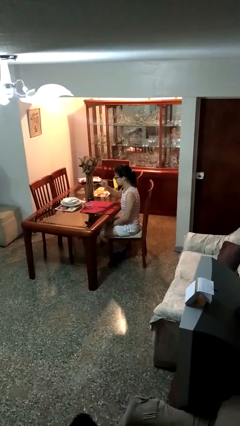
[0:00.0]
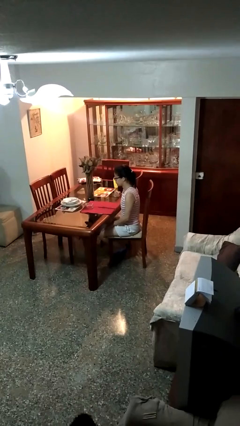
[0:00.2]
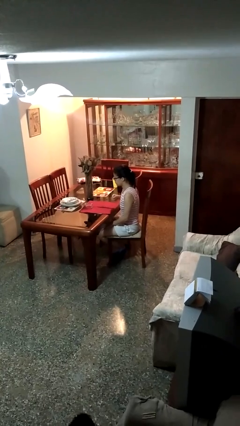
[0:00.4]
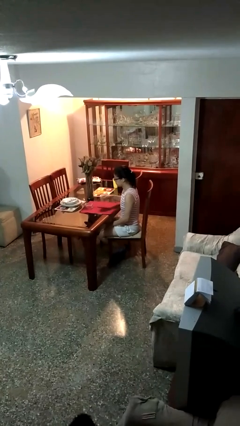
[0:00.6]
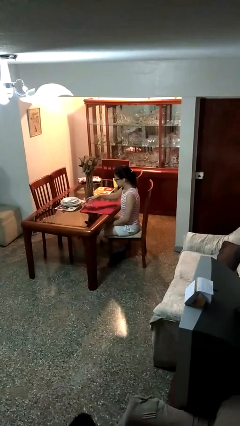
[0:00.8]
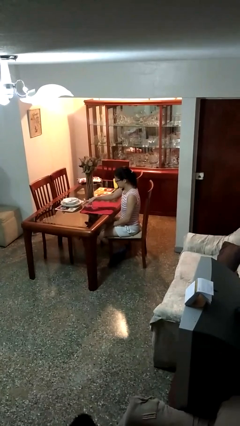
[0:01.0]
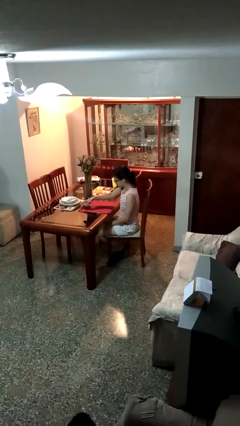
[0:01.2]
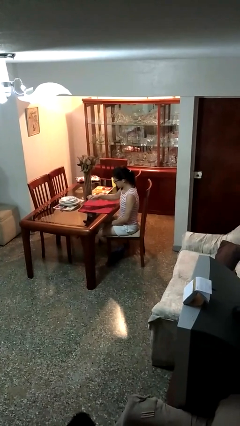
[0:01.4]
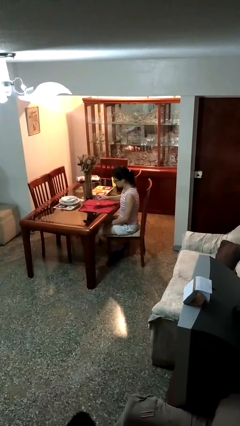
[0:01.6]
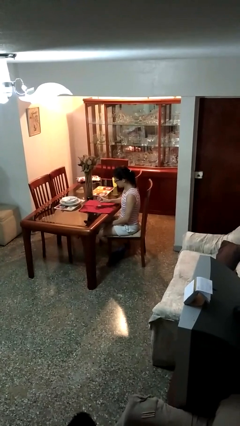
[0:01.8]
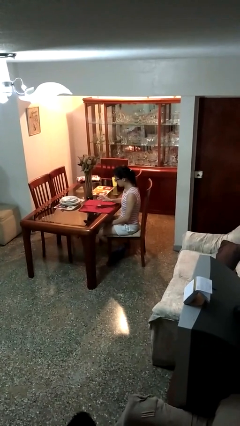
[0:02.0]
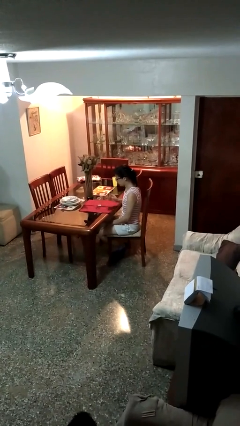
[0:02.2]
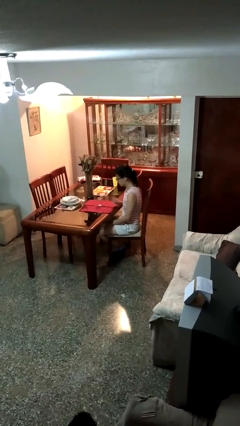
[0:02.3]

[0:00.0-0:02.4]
person sets upright glass

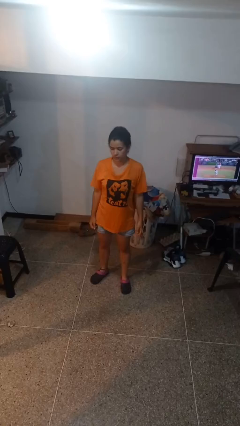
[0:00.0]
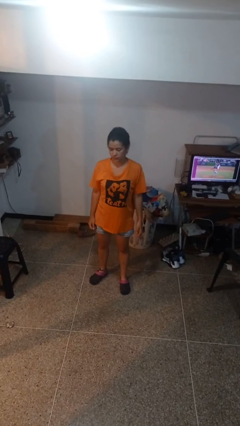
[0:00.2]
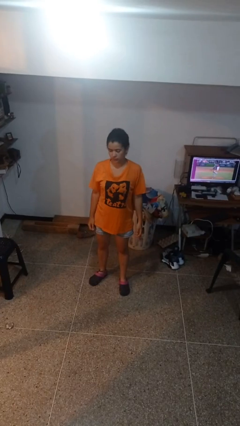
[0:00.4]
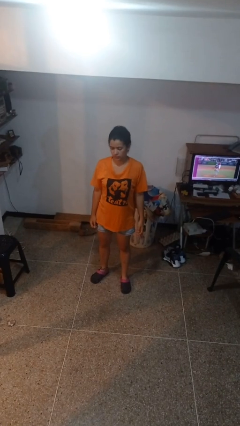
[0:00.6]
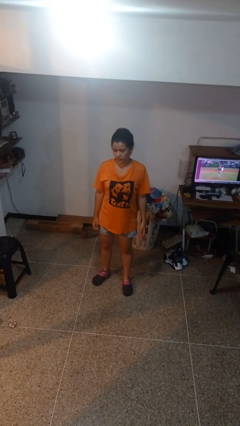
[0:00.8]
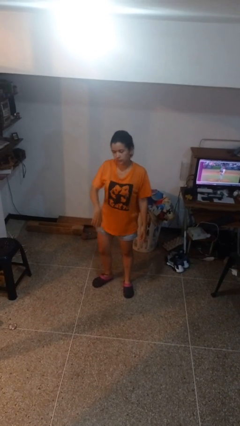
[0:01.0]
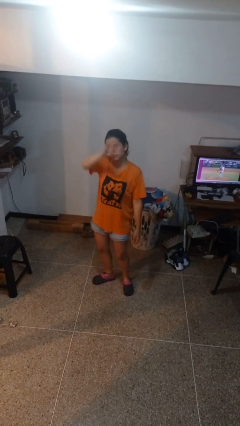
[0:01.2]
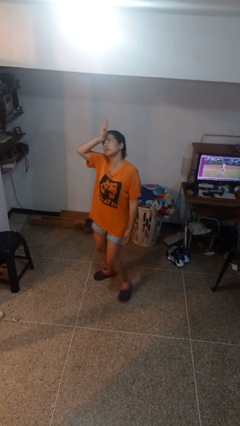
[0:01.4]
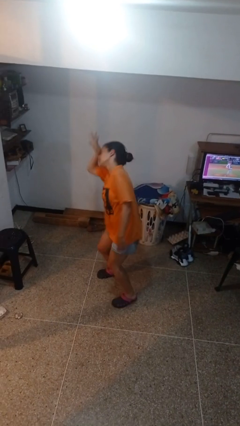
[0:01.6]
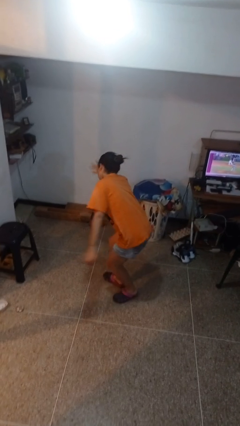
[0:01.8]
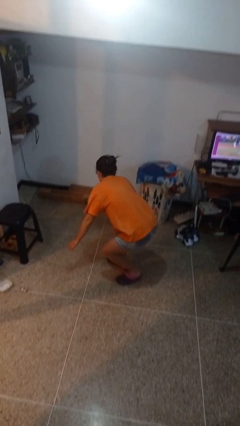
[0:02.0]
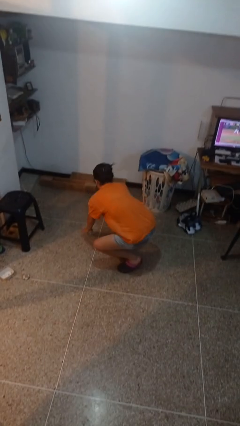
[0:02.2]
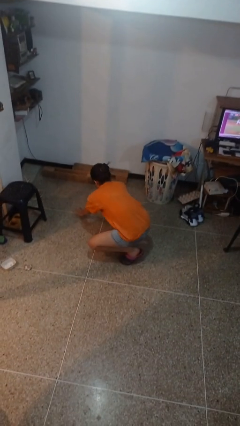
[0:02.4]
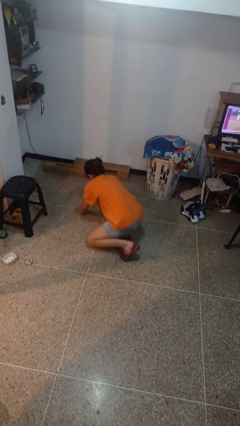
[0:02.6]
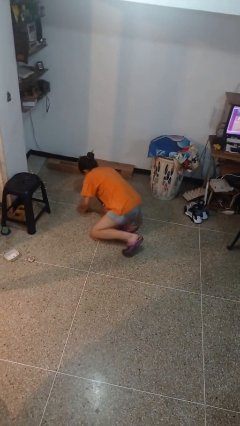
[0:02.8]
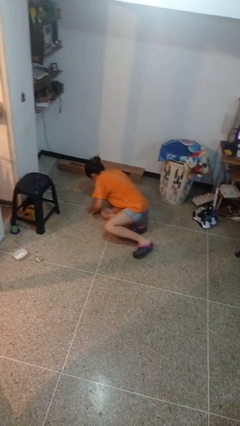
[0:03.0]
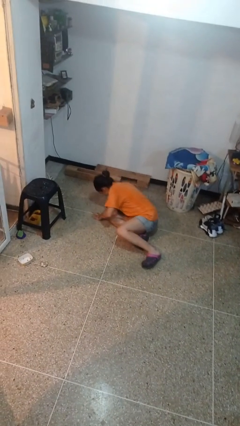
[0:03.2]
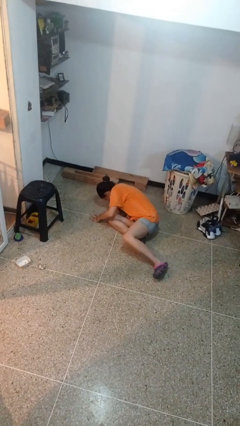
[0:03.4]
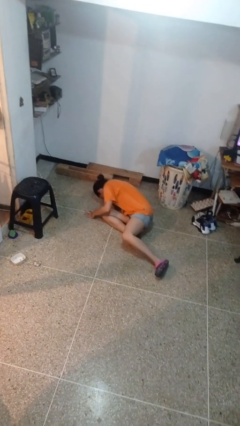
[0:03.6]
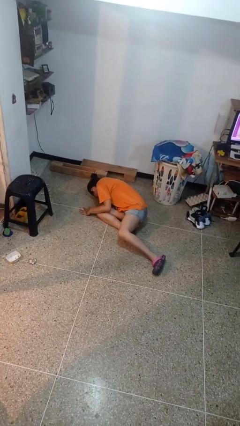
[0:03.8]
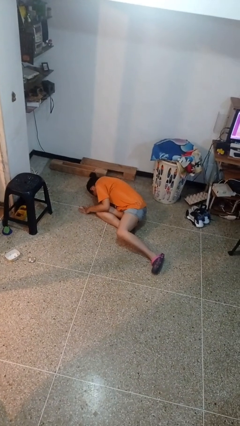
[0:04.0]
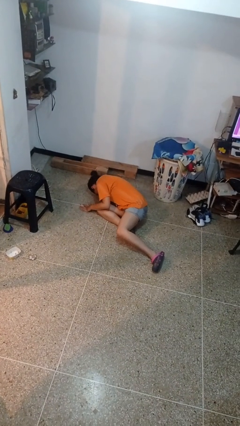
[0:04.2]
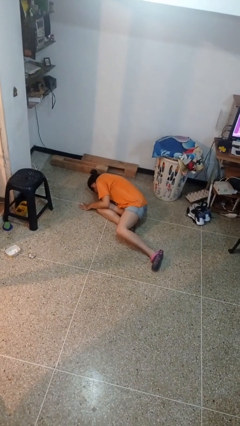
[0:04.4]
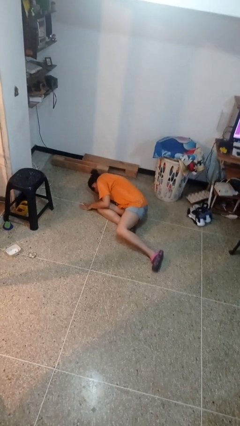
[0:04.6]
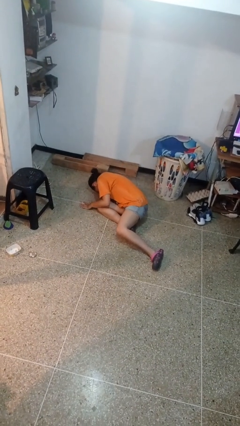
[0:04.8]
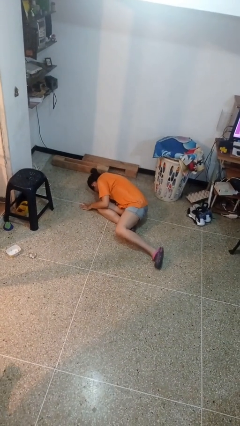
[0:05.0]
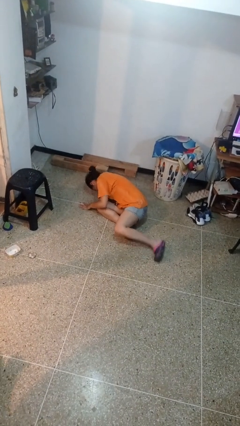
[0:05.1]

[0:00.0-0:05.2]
person falls while standing

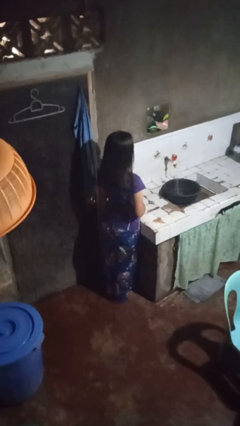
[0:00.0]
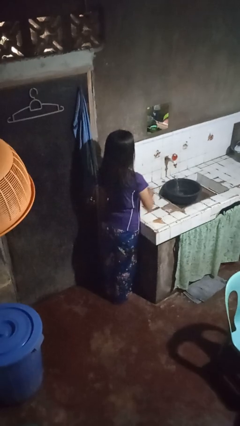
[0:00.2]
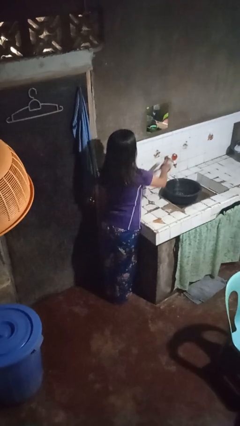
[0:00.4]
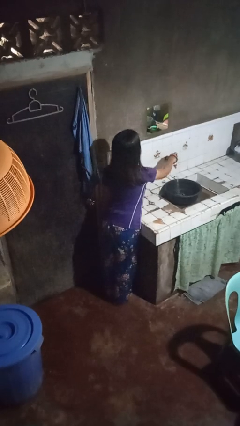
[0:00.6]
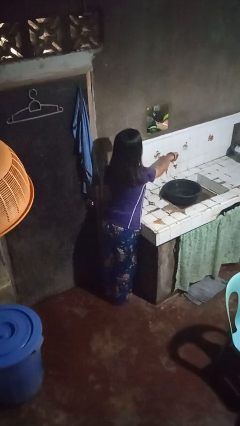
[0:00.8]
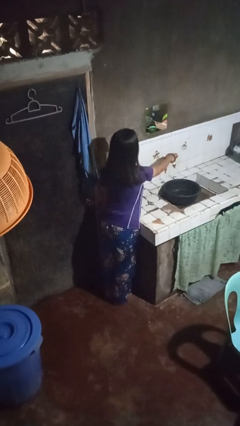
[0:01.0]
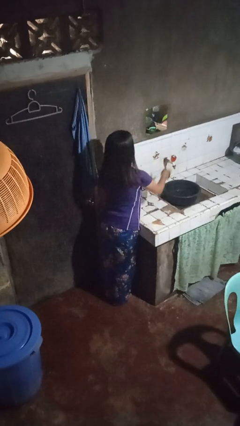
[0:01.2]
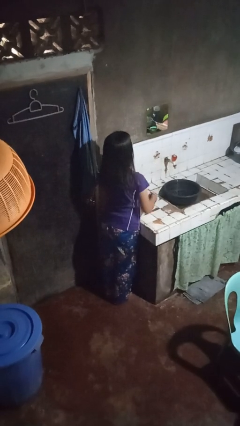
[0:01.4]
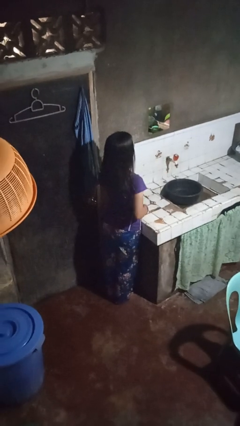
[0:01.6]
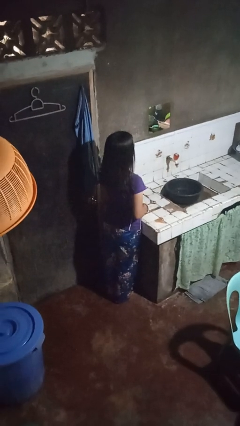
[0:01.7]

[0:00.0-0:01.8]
person turns off faucet

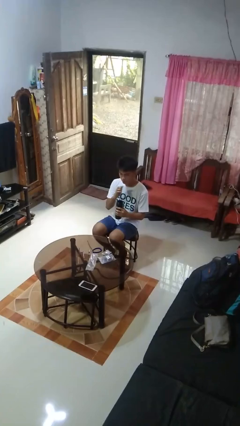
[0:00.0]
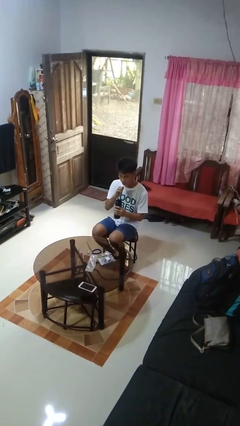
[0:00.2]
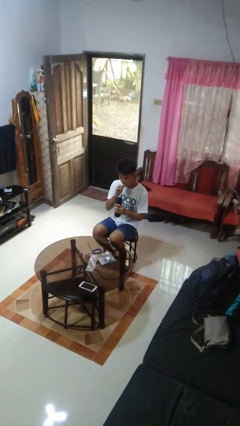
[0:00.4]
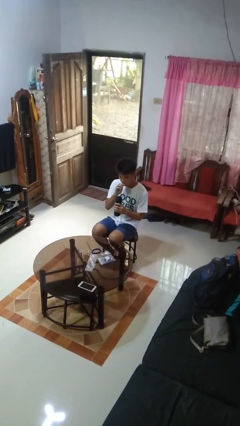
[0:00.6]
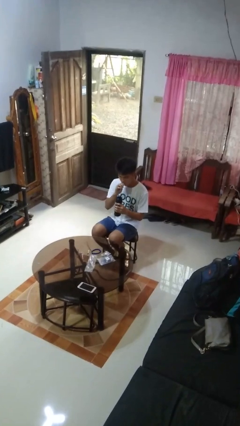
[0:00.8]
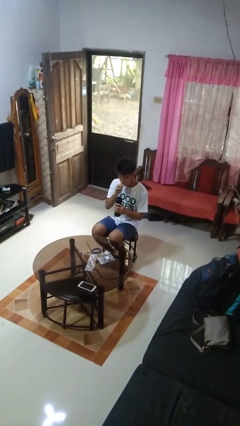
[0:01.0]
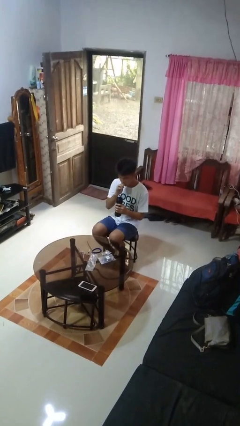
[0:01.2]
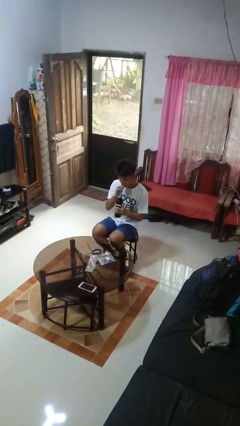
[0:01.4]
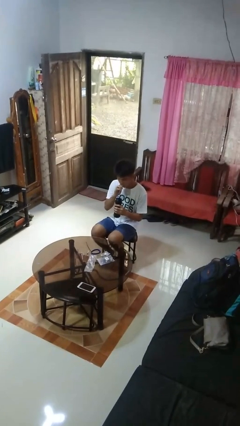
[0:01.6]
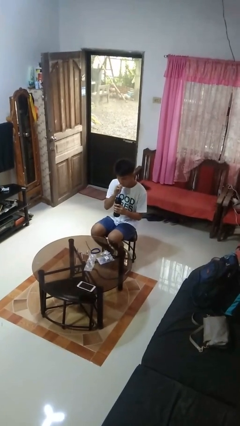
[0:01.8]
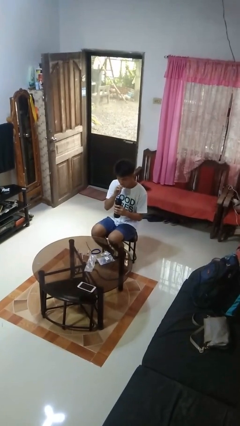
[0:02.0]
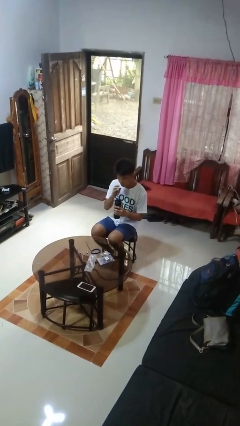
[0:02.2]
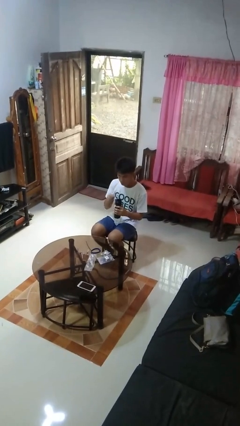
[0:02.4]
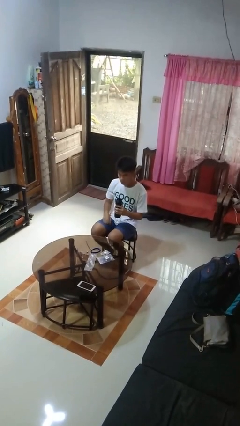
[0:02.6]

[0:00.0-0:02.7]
person drinks from straw

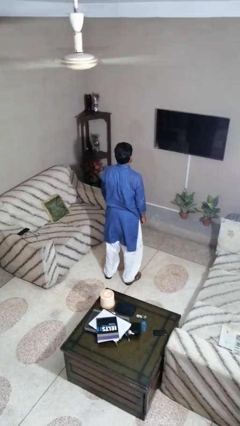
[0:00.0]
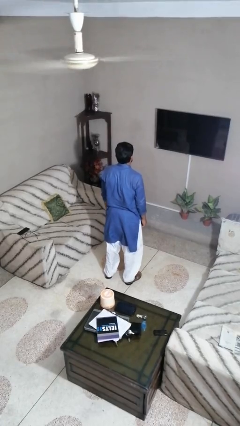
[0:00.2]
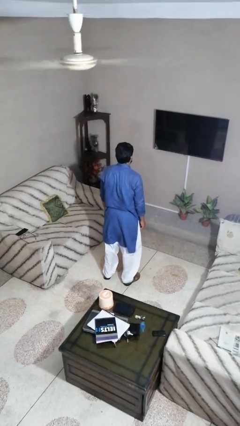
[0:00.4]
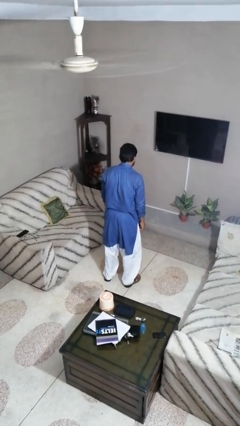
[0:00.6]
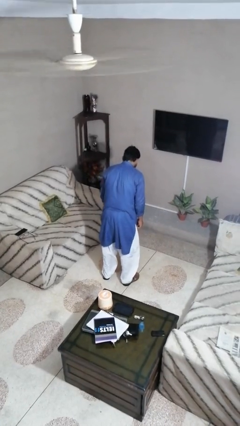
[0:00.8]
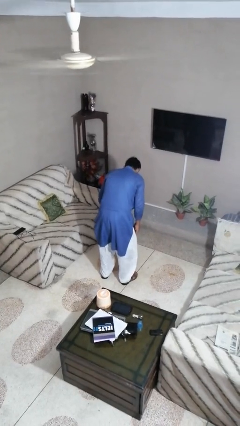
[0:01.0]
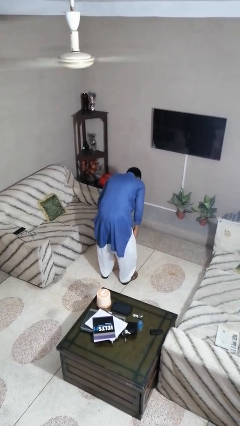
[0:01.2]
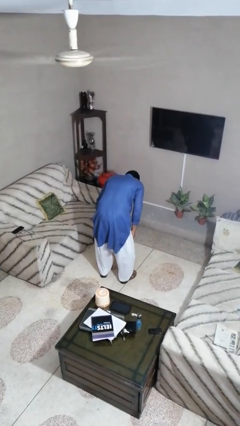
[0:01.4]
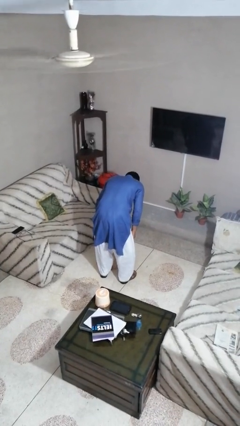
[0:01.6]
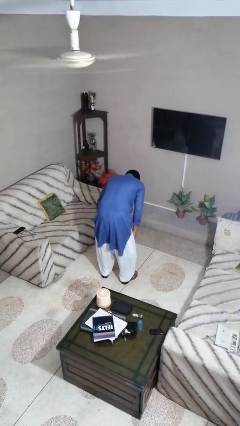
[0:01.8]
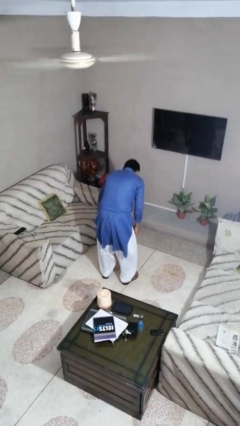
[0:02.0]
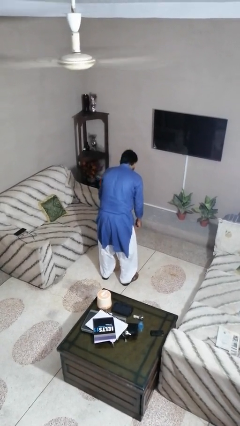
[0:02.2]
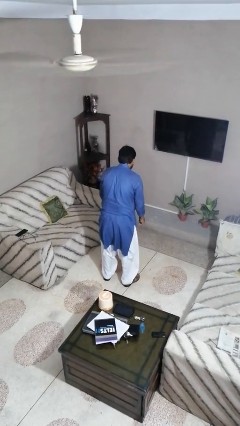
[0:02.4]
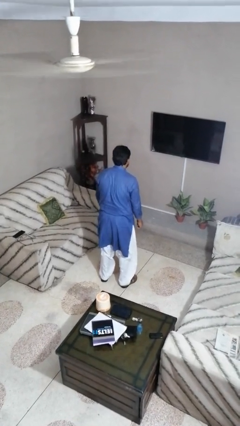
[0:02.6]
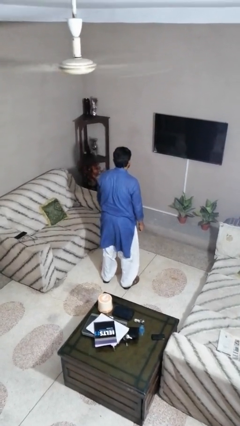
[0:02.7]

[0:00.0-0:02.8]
person bows

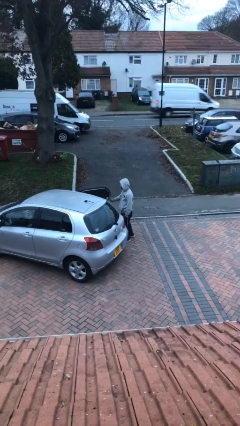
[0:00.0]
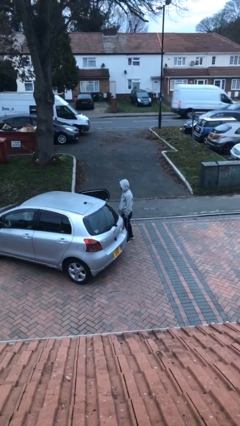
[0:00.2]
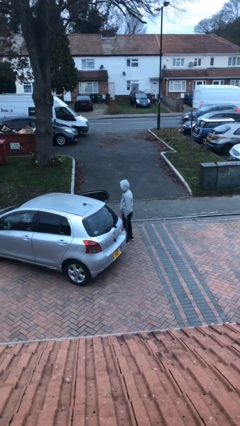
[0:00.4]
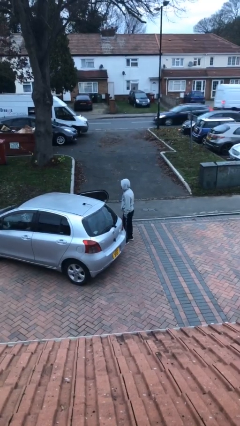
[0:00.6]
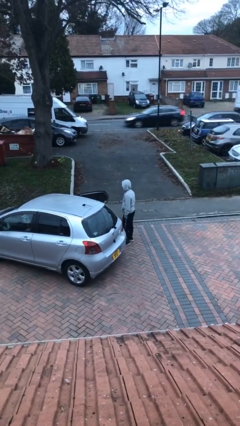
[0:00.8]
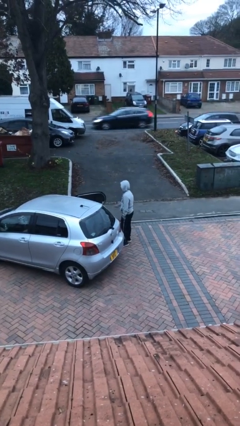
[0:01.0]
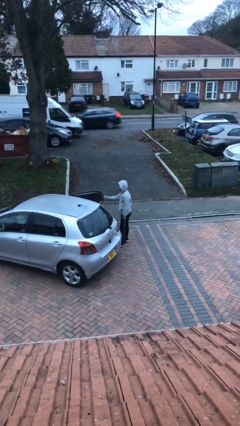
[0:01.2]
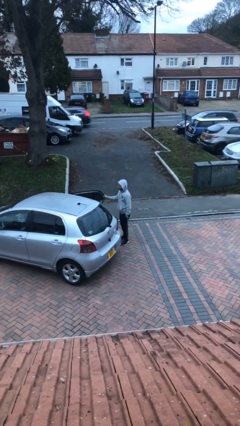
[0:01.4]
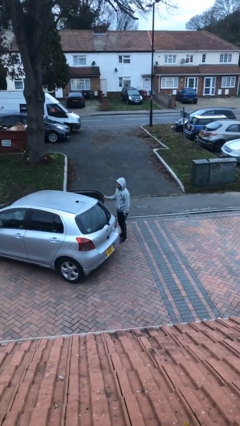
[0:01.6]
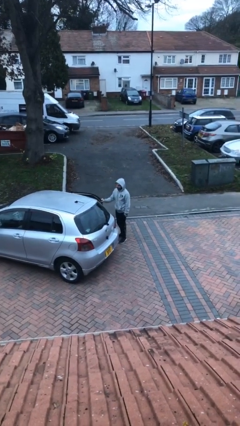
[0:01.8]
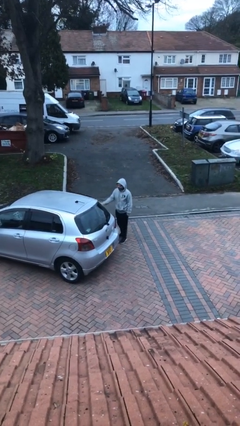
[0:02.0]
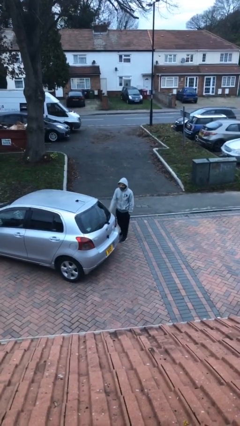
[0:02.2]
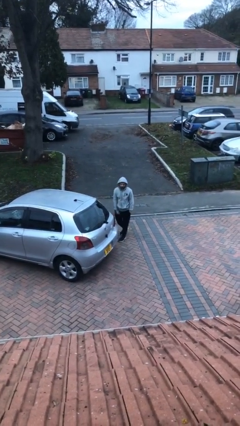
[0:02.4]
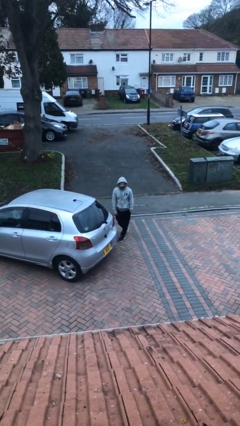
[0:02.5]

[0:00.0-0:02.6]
person closes car door
